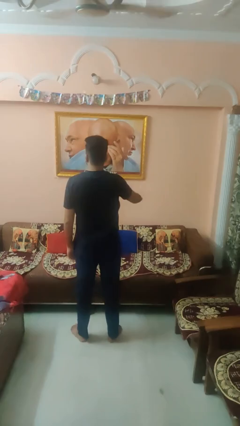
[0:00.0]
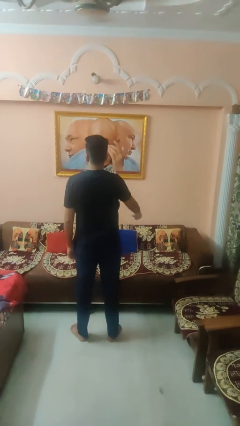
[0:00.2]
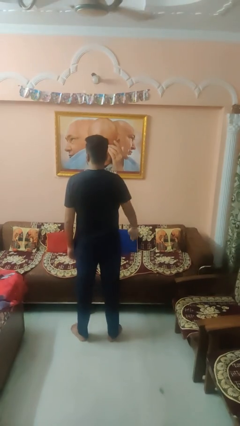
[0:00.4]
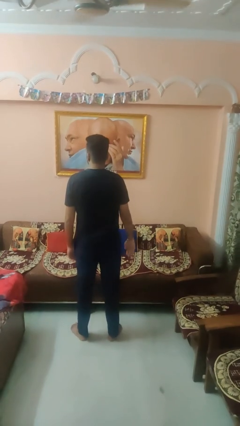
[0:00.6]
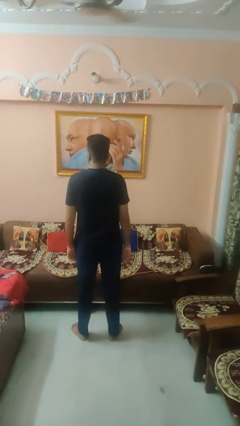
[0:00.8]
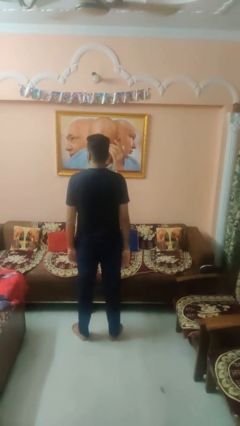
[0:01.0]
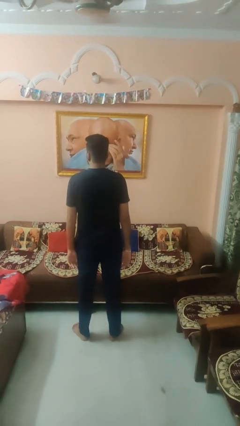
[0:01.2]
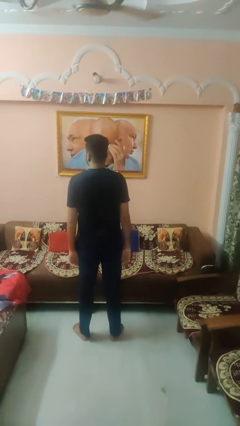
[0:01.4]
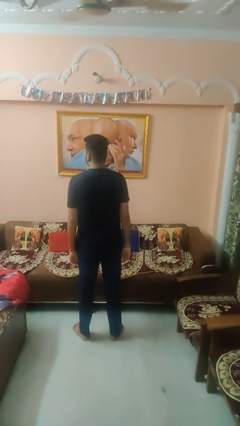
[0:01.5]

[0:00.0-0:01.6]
person gestures lower hand

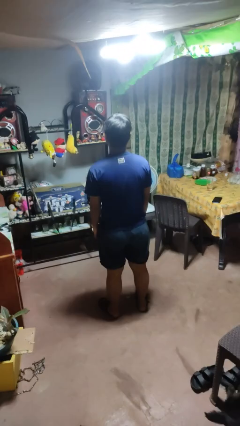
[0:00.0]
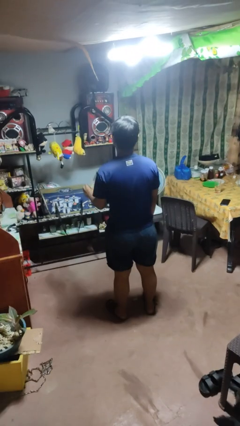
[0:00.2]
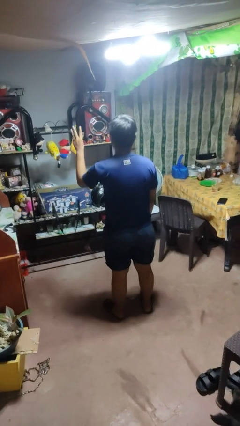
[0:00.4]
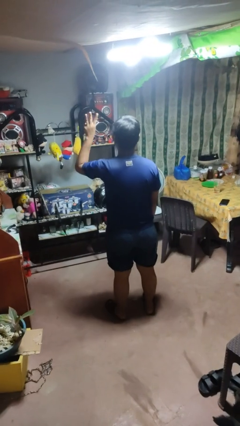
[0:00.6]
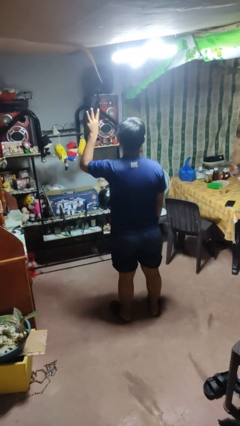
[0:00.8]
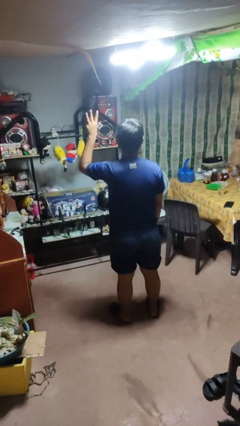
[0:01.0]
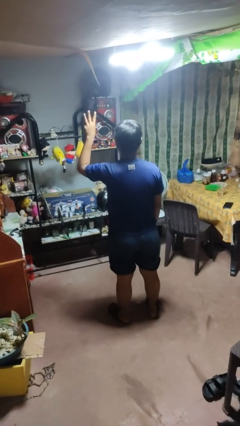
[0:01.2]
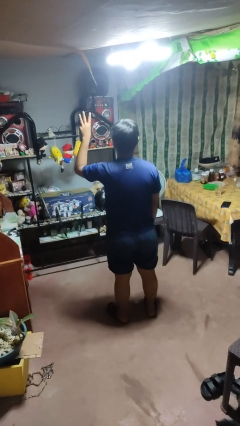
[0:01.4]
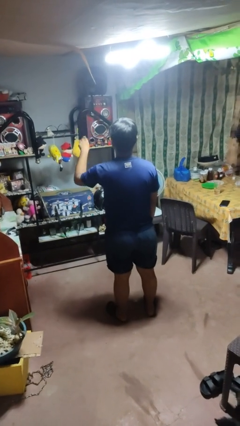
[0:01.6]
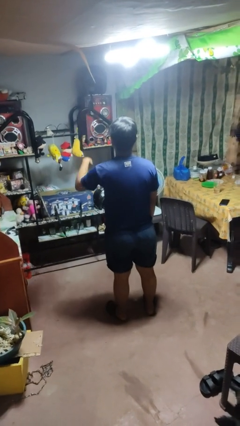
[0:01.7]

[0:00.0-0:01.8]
person gestures number three

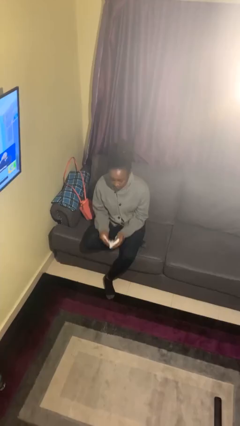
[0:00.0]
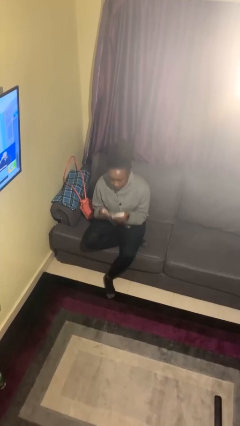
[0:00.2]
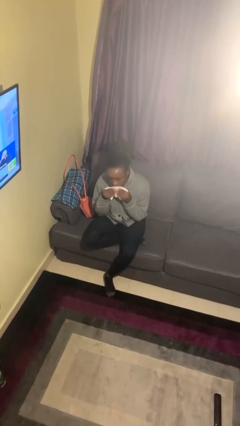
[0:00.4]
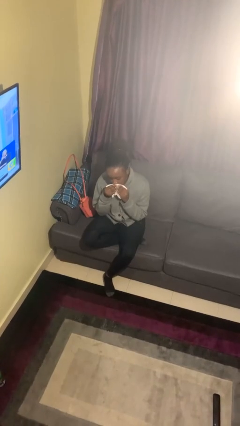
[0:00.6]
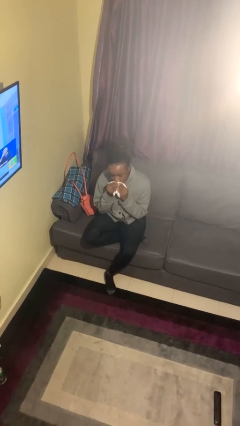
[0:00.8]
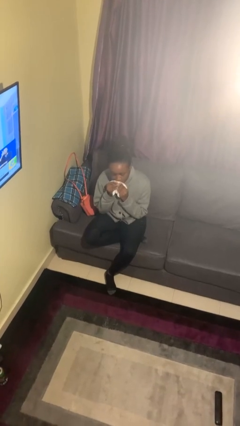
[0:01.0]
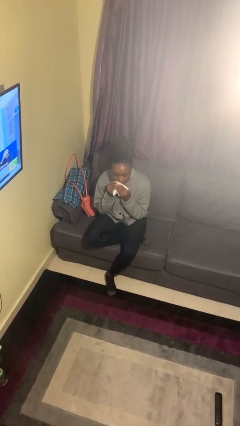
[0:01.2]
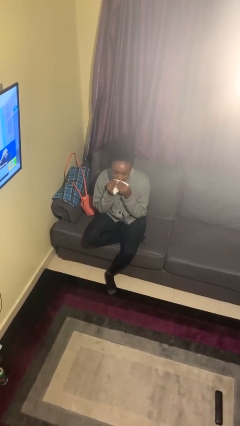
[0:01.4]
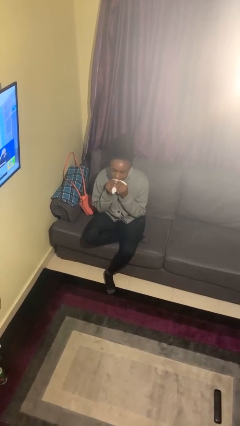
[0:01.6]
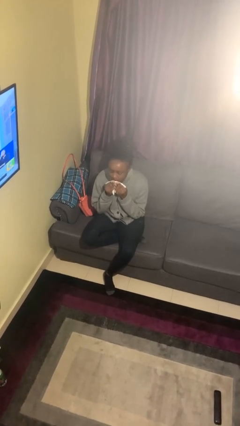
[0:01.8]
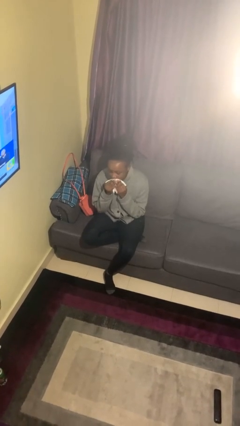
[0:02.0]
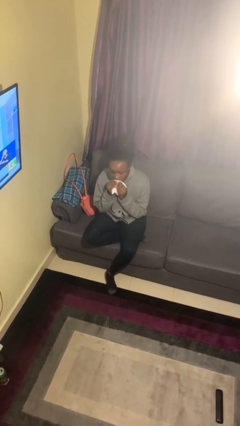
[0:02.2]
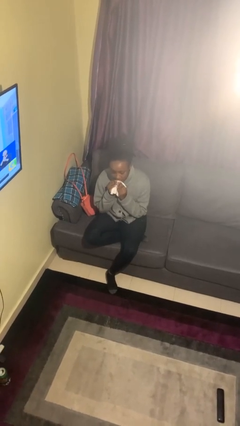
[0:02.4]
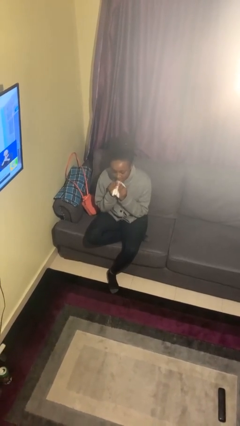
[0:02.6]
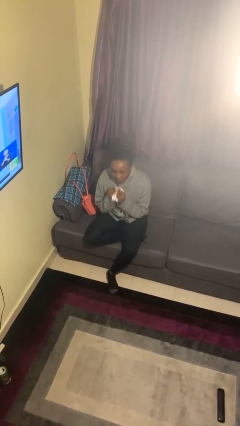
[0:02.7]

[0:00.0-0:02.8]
person wipes mouth with napkin

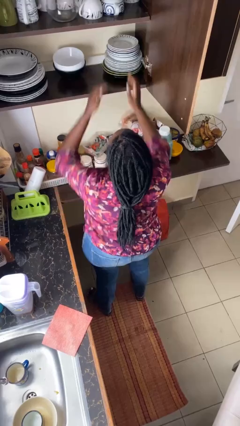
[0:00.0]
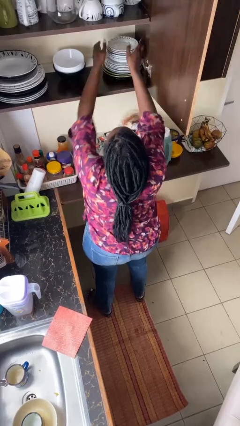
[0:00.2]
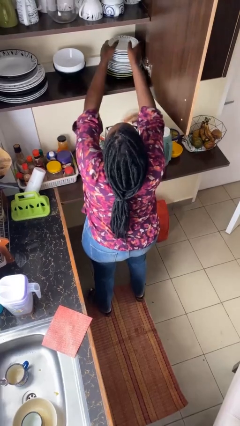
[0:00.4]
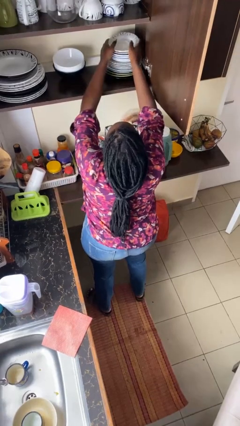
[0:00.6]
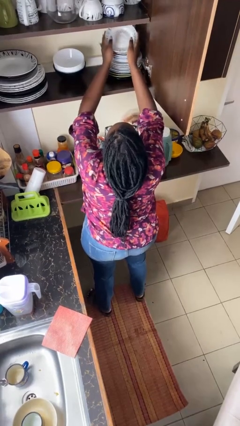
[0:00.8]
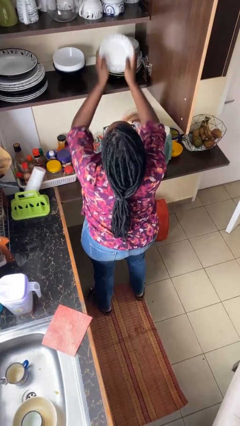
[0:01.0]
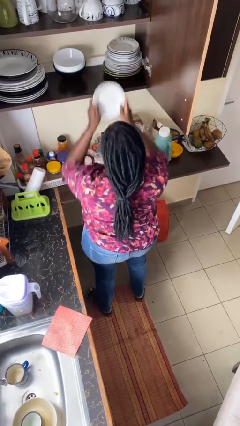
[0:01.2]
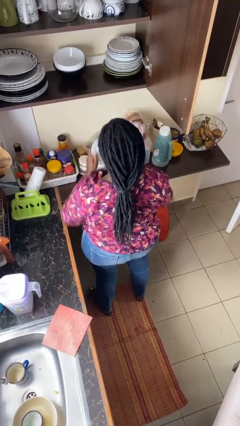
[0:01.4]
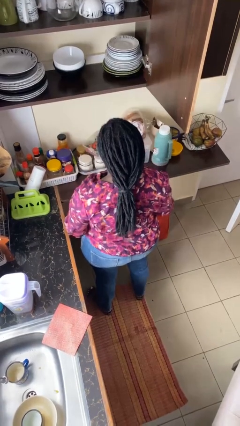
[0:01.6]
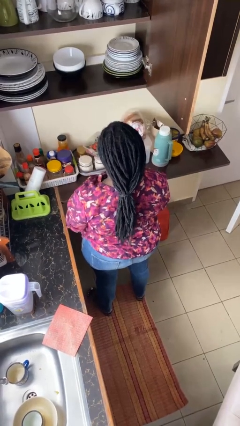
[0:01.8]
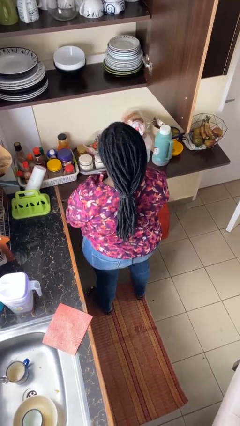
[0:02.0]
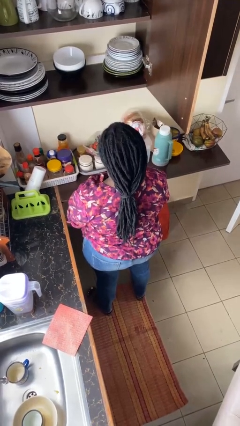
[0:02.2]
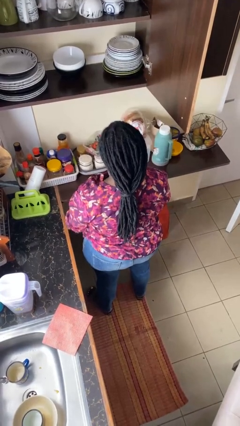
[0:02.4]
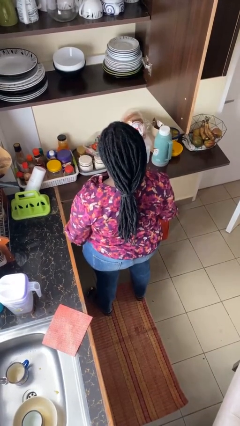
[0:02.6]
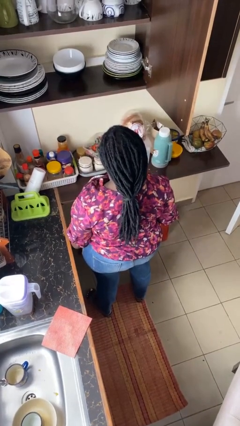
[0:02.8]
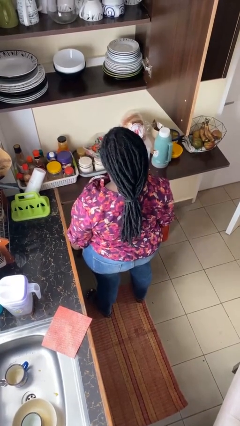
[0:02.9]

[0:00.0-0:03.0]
person takes object from cabinet

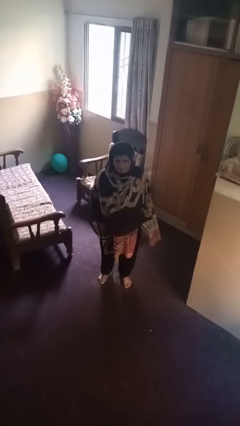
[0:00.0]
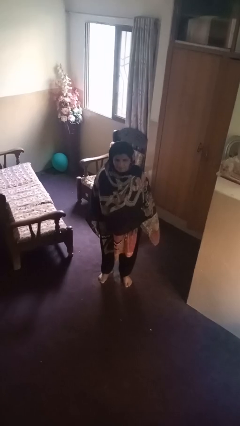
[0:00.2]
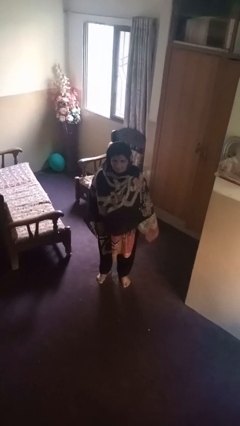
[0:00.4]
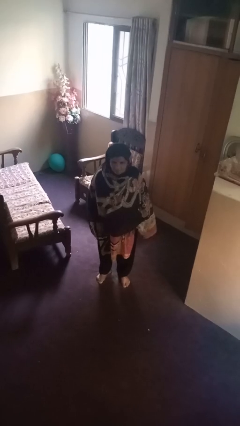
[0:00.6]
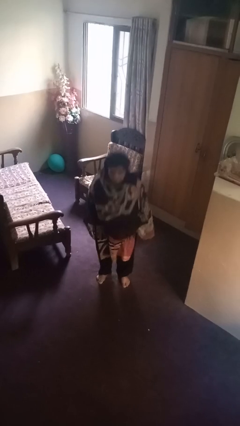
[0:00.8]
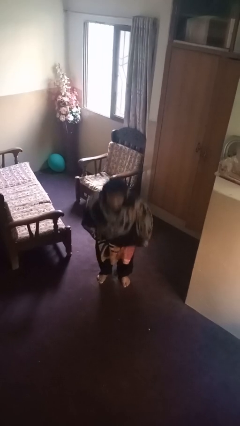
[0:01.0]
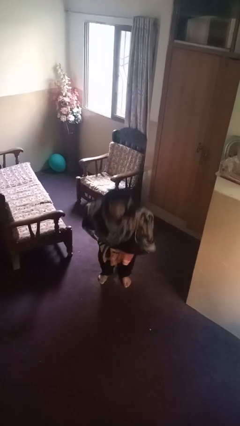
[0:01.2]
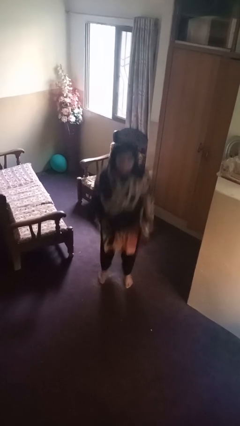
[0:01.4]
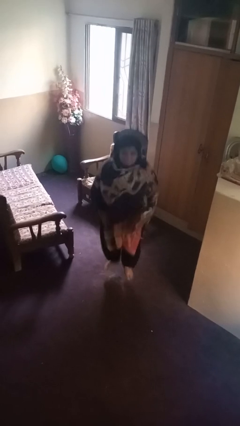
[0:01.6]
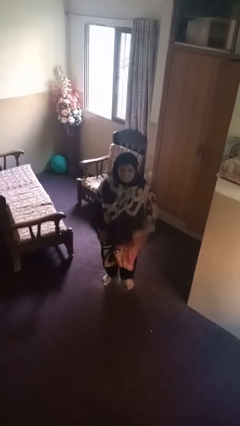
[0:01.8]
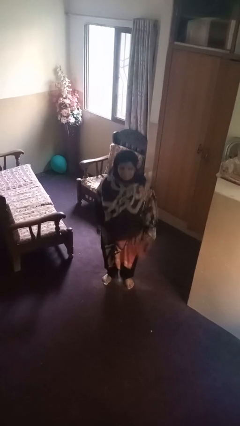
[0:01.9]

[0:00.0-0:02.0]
person jumps

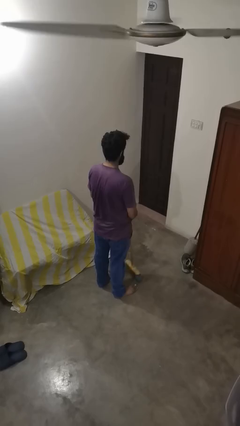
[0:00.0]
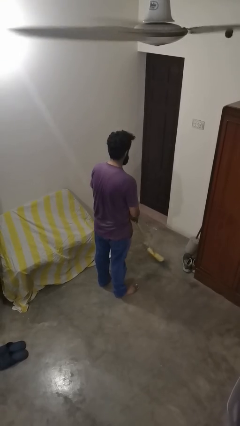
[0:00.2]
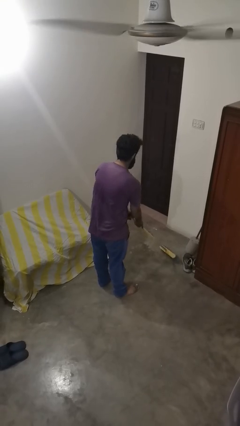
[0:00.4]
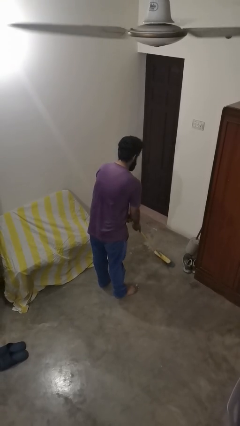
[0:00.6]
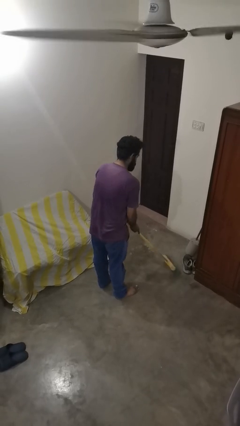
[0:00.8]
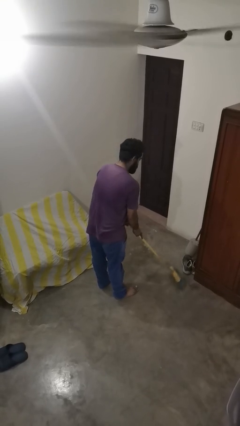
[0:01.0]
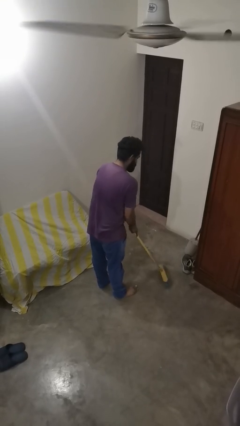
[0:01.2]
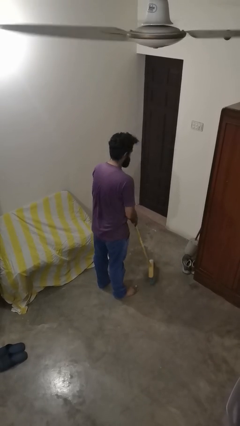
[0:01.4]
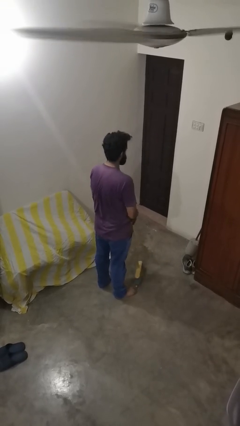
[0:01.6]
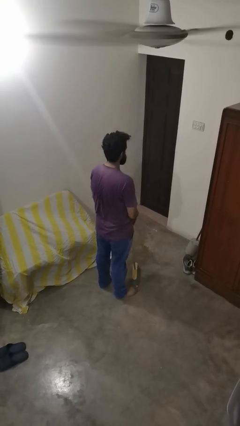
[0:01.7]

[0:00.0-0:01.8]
person sweeps floor

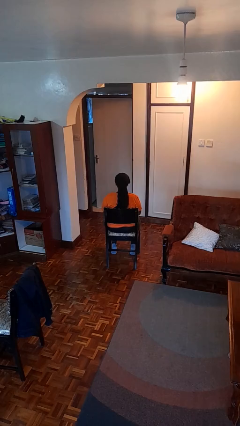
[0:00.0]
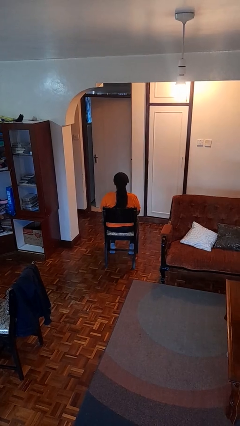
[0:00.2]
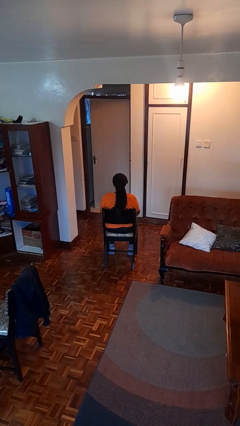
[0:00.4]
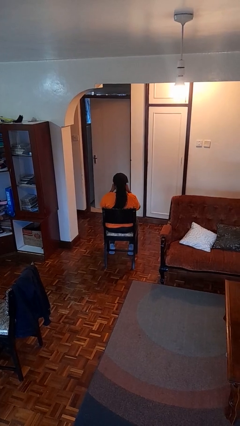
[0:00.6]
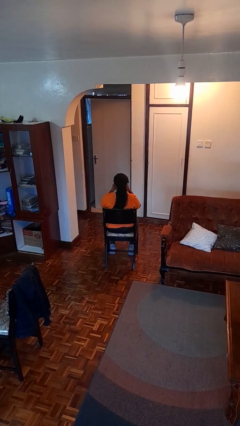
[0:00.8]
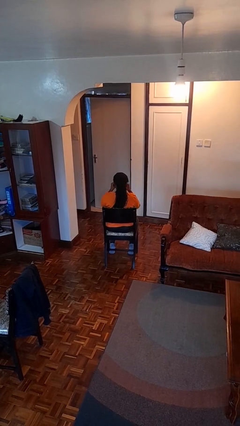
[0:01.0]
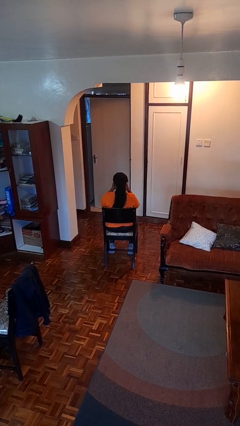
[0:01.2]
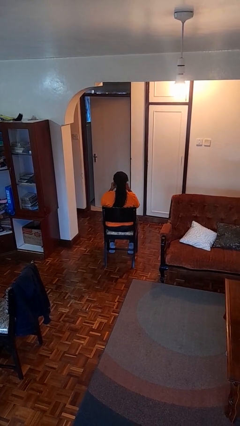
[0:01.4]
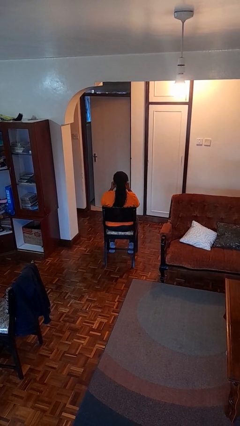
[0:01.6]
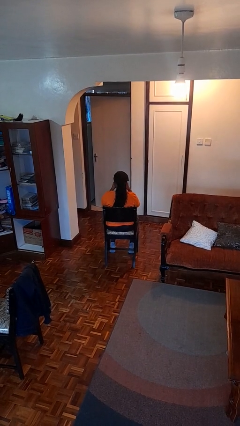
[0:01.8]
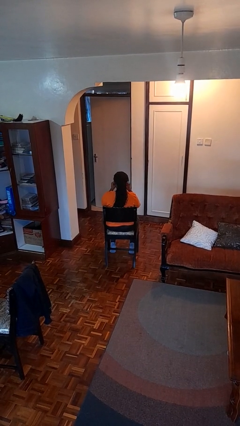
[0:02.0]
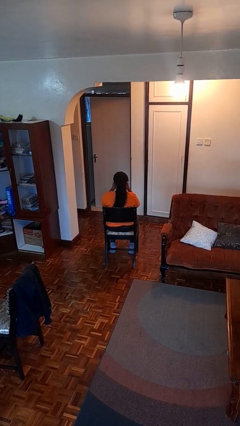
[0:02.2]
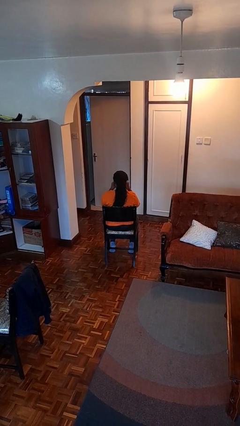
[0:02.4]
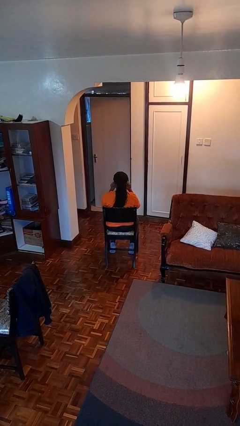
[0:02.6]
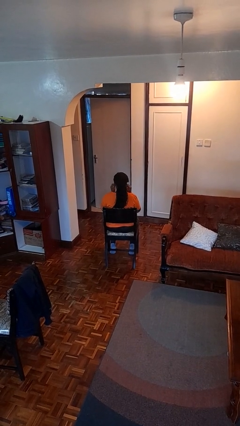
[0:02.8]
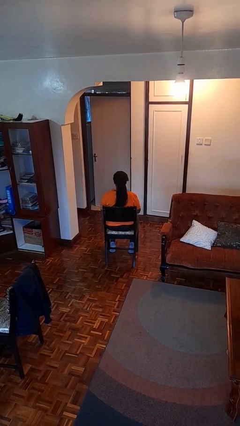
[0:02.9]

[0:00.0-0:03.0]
person rubs eyes

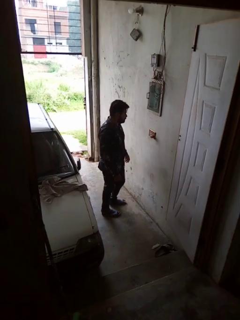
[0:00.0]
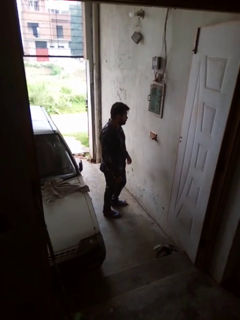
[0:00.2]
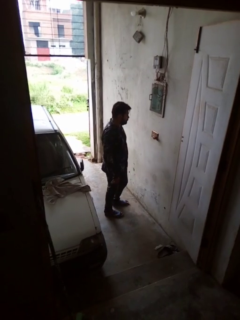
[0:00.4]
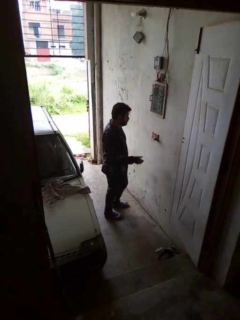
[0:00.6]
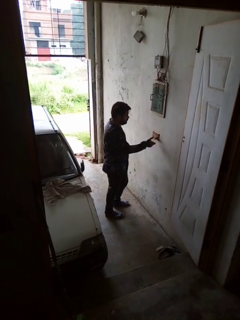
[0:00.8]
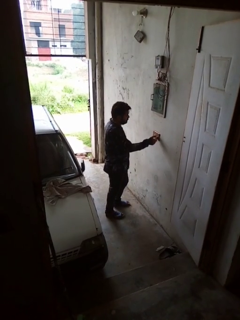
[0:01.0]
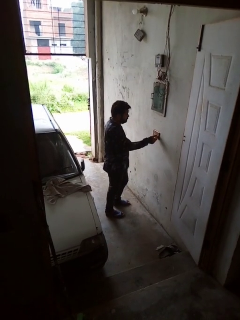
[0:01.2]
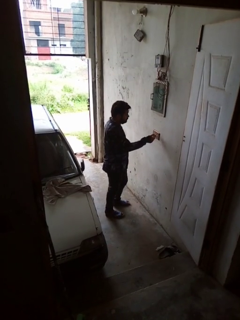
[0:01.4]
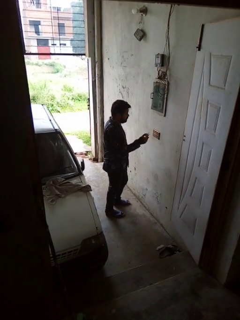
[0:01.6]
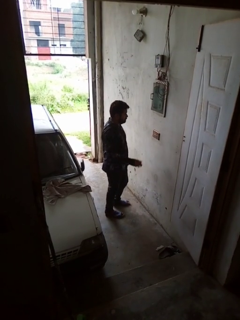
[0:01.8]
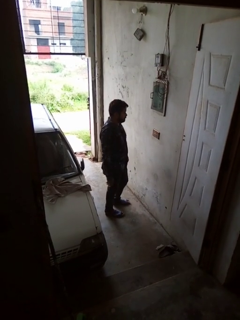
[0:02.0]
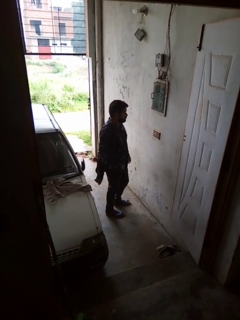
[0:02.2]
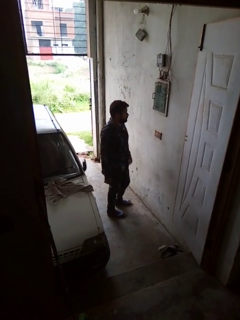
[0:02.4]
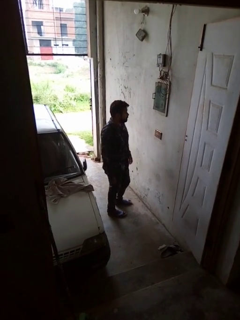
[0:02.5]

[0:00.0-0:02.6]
person unplugs from electrical socket
